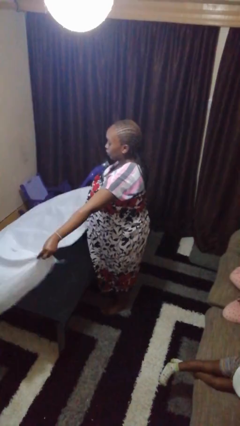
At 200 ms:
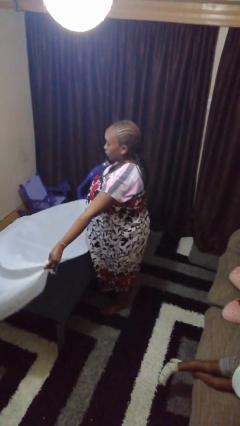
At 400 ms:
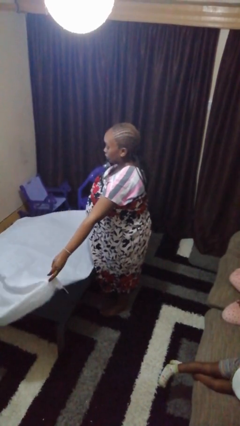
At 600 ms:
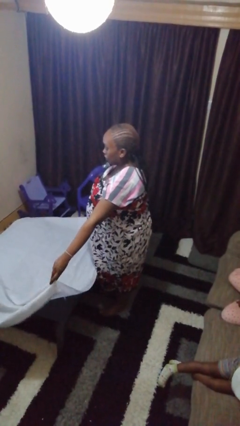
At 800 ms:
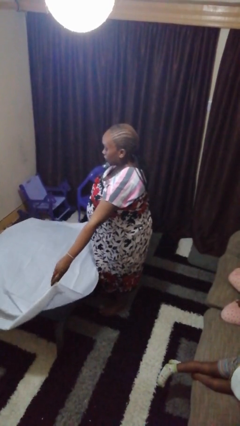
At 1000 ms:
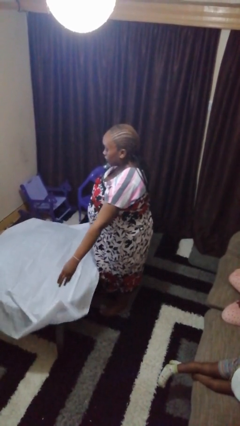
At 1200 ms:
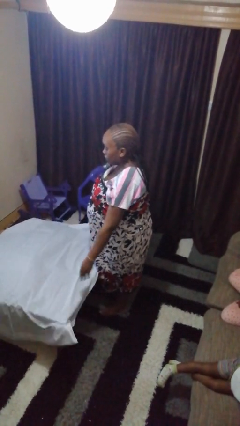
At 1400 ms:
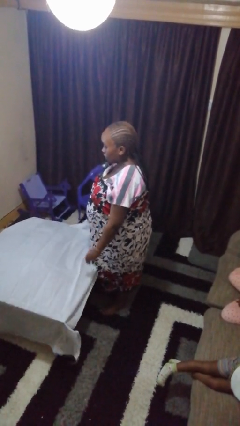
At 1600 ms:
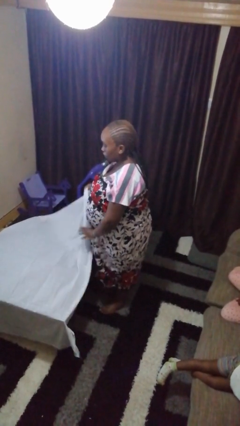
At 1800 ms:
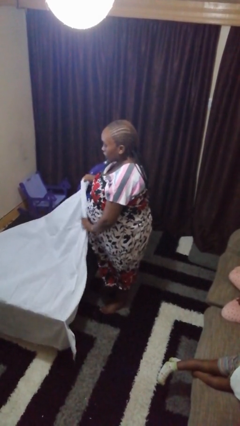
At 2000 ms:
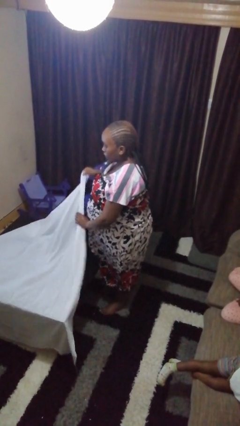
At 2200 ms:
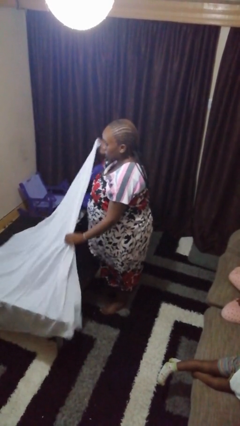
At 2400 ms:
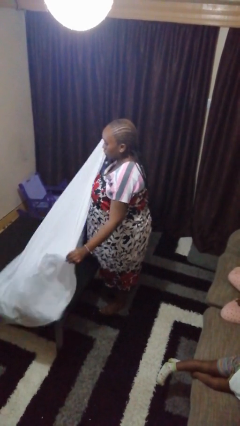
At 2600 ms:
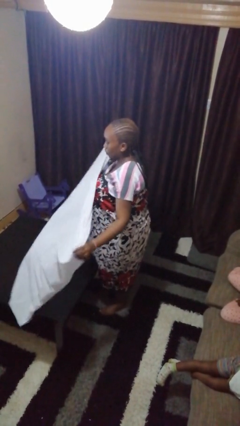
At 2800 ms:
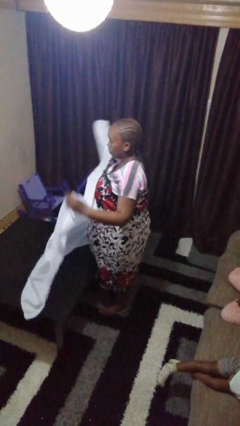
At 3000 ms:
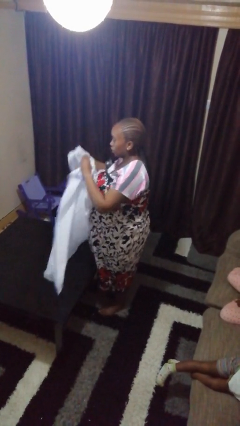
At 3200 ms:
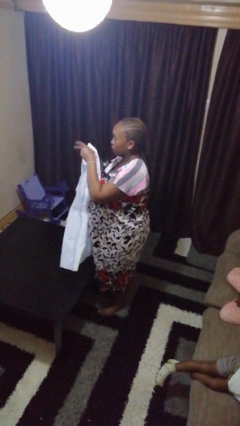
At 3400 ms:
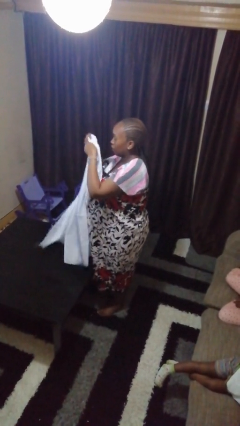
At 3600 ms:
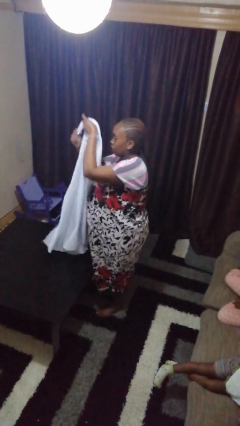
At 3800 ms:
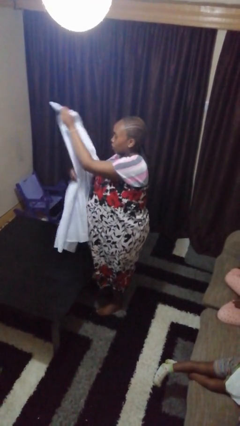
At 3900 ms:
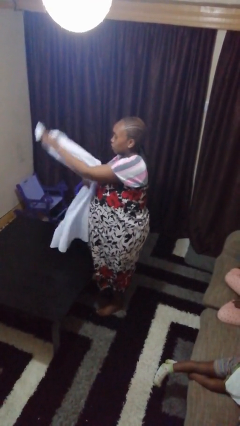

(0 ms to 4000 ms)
person folds tablecloth

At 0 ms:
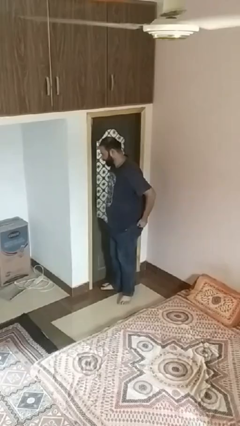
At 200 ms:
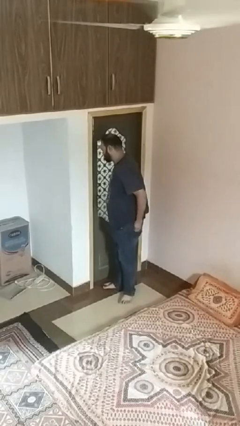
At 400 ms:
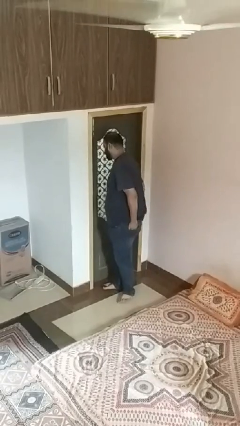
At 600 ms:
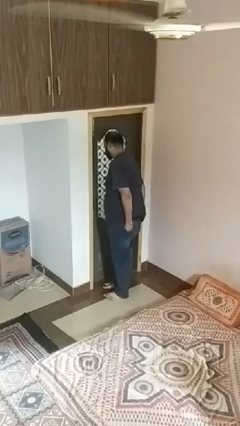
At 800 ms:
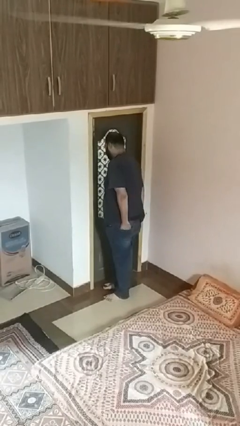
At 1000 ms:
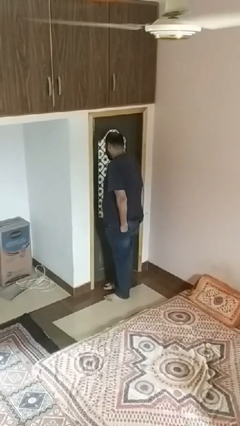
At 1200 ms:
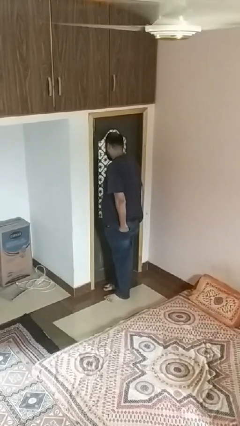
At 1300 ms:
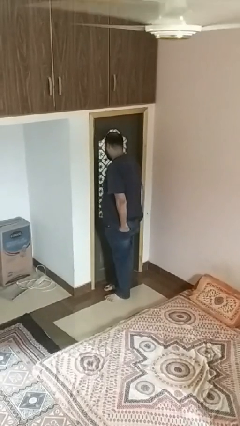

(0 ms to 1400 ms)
person puts hands in back pockets

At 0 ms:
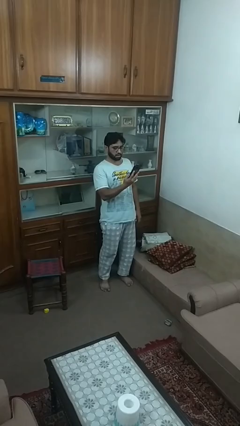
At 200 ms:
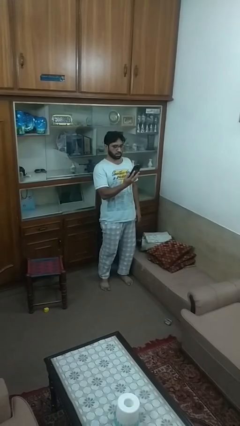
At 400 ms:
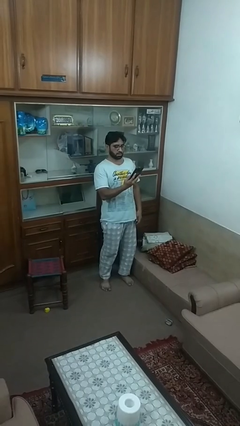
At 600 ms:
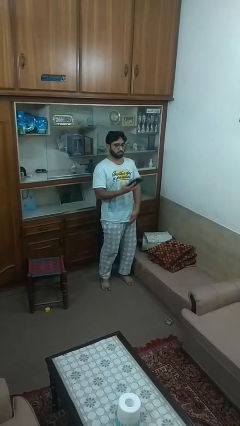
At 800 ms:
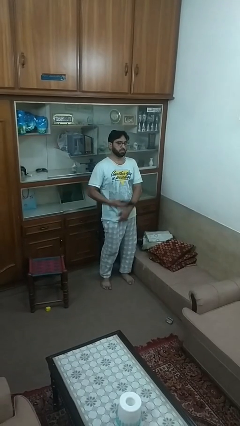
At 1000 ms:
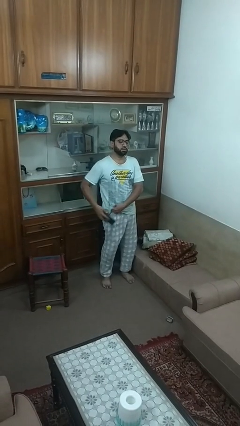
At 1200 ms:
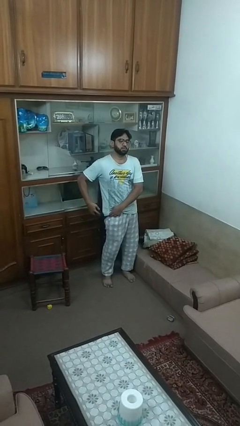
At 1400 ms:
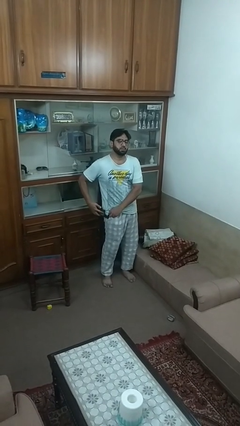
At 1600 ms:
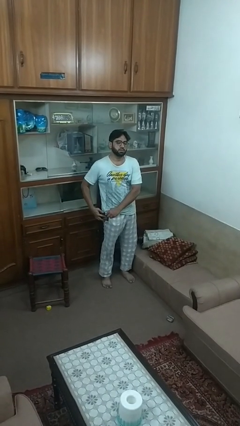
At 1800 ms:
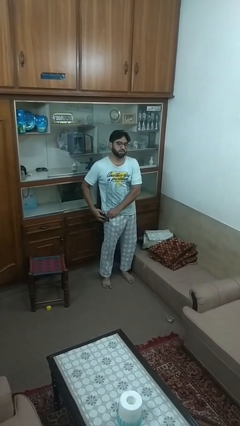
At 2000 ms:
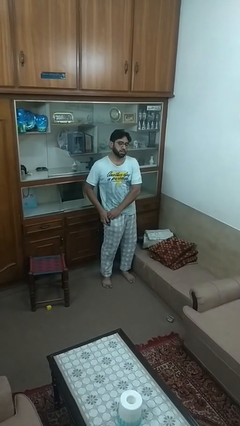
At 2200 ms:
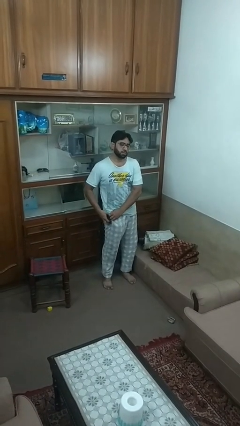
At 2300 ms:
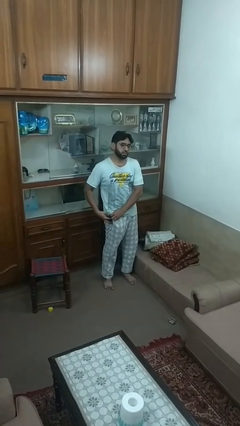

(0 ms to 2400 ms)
person puts phone into pocket

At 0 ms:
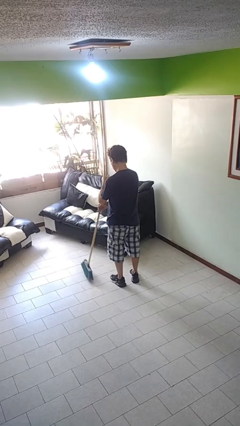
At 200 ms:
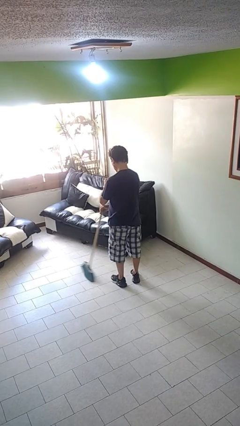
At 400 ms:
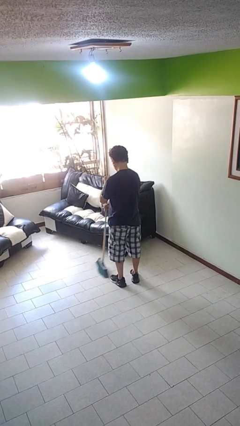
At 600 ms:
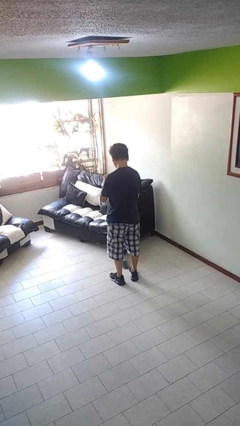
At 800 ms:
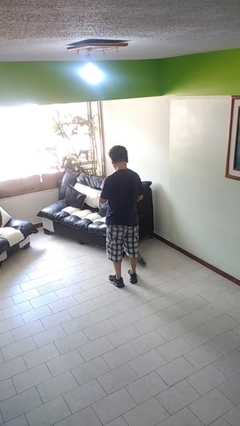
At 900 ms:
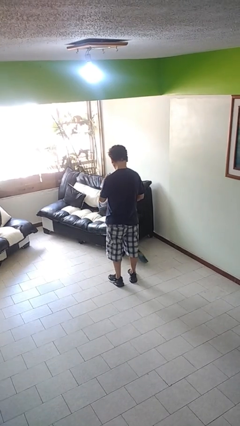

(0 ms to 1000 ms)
person sweeps floor

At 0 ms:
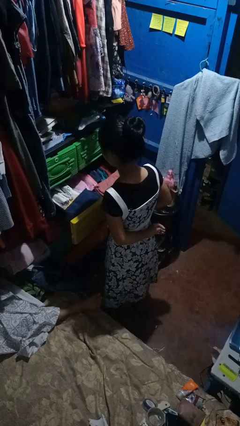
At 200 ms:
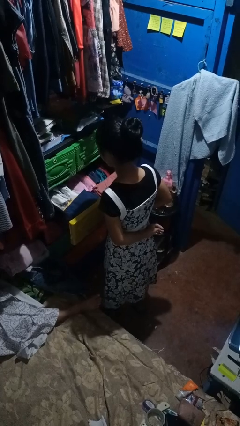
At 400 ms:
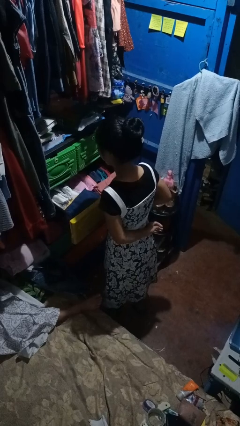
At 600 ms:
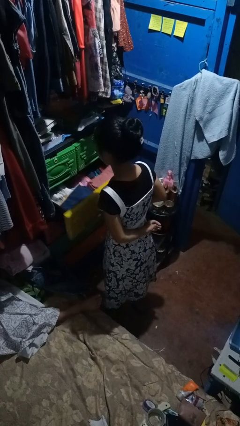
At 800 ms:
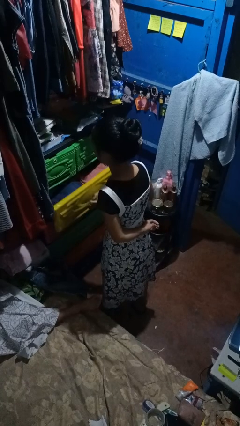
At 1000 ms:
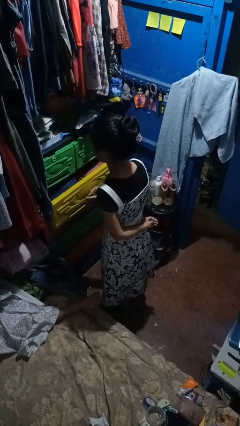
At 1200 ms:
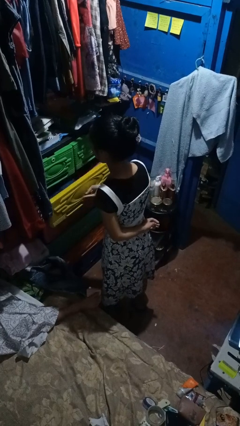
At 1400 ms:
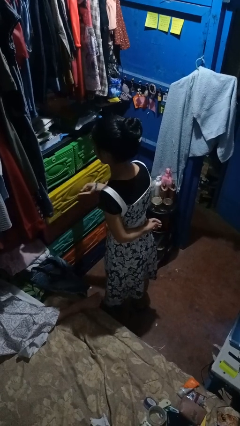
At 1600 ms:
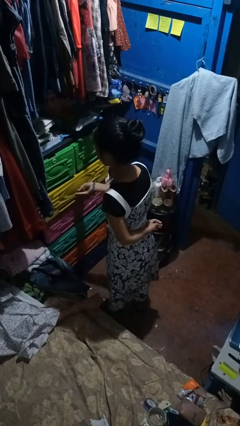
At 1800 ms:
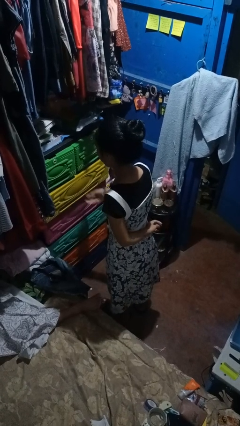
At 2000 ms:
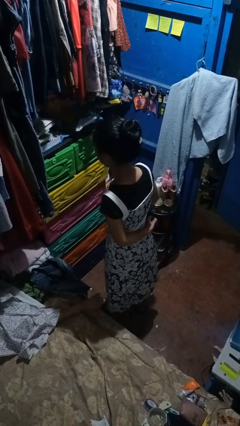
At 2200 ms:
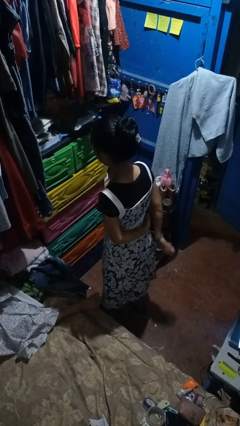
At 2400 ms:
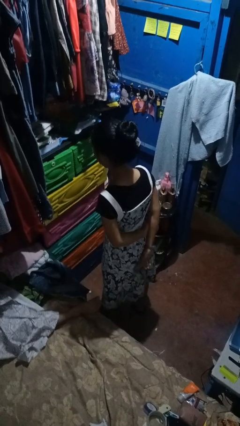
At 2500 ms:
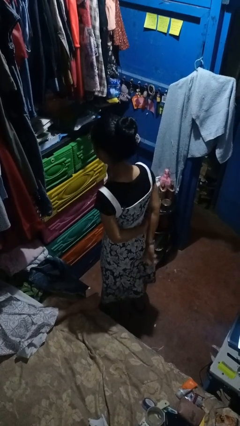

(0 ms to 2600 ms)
person closes dresser drawer

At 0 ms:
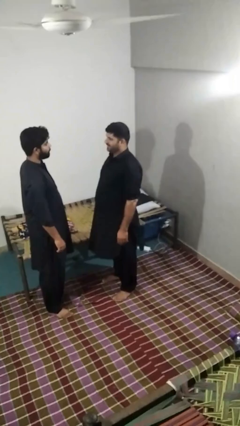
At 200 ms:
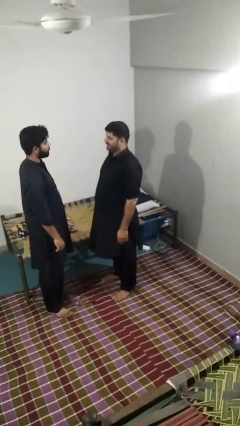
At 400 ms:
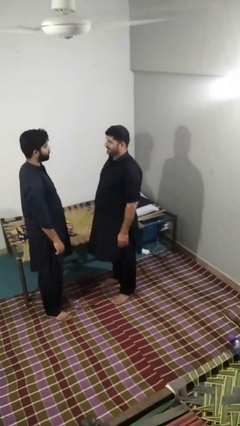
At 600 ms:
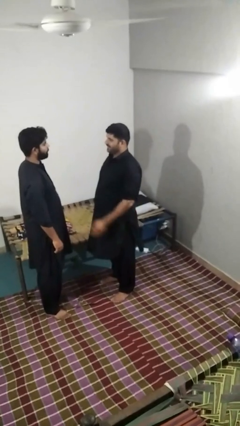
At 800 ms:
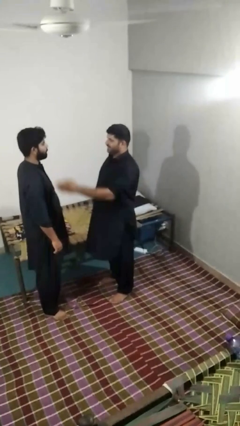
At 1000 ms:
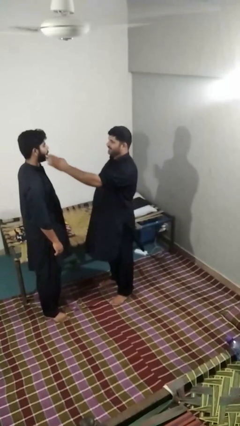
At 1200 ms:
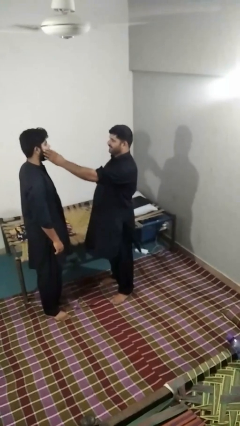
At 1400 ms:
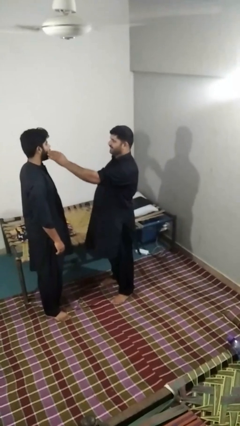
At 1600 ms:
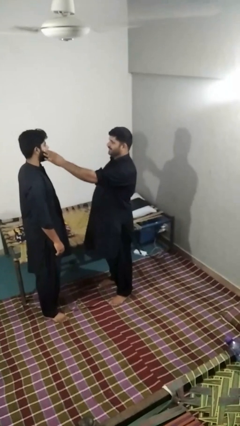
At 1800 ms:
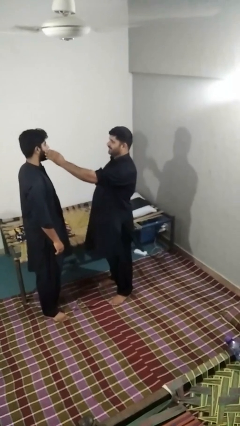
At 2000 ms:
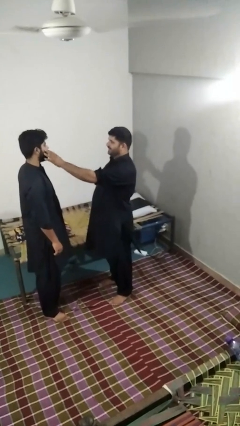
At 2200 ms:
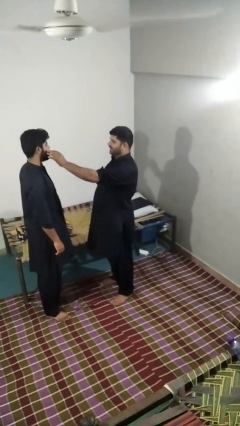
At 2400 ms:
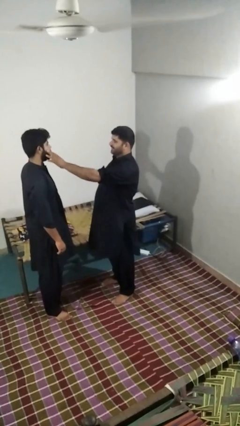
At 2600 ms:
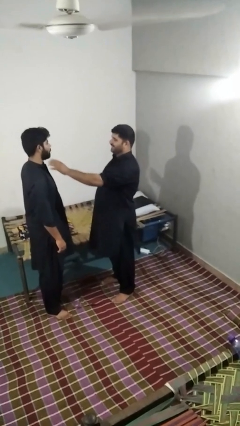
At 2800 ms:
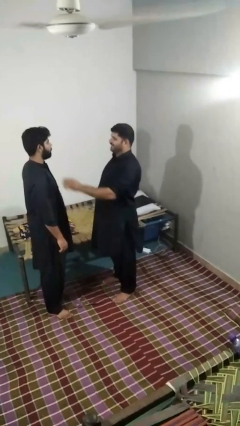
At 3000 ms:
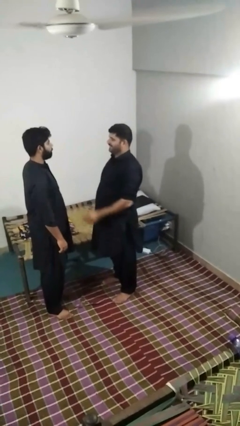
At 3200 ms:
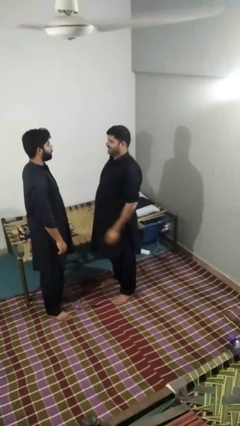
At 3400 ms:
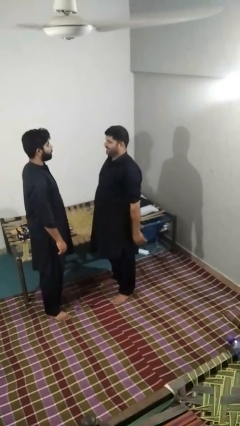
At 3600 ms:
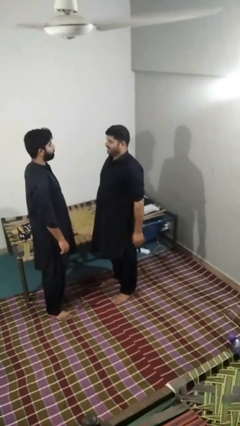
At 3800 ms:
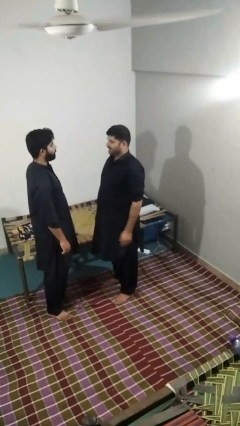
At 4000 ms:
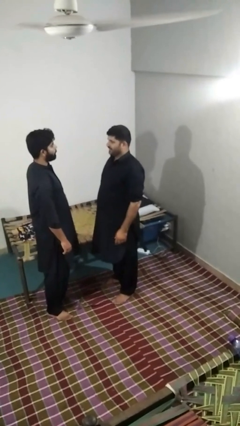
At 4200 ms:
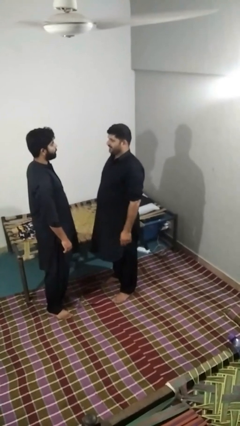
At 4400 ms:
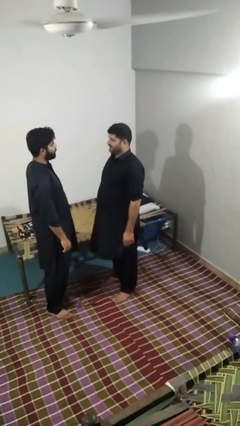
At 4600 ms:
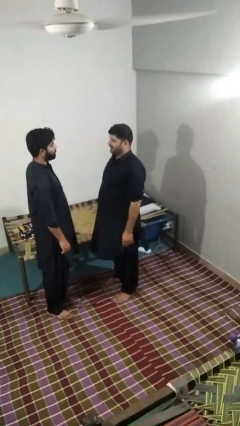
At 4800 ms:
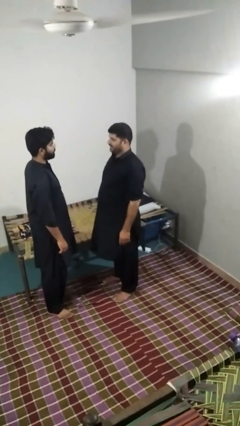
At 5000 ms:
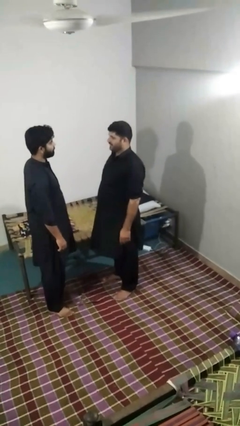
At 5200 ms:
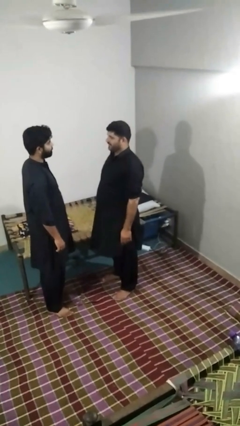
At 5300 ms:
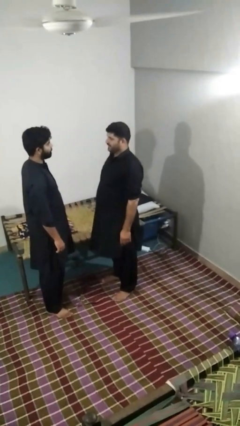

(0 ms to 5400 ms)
person touches face of person

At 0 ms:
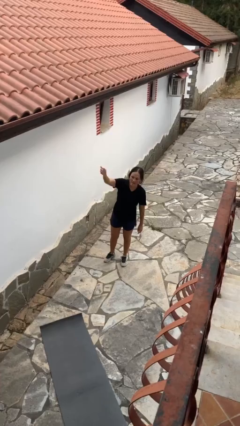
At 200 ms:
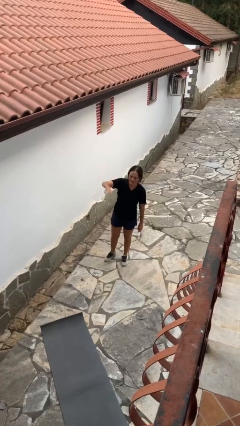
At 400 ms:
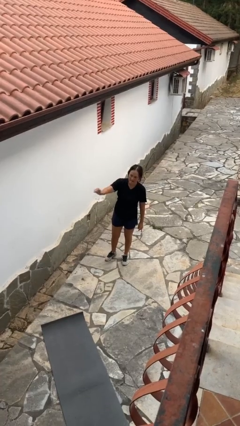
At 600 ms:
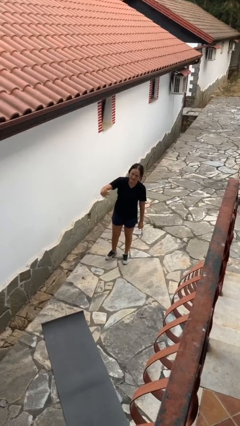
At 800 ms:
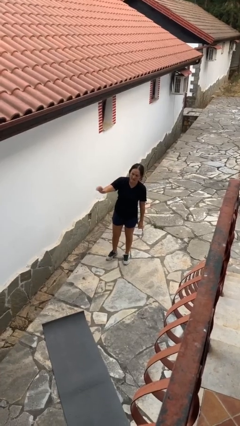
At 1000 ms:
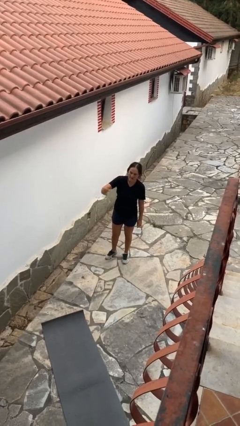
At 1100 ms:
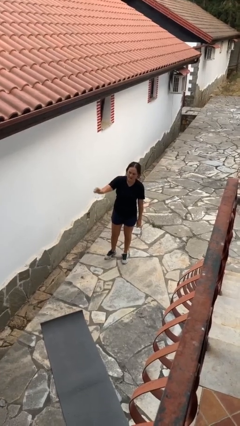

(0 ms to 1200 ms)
person gestures lower hand
